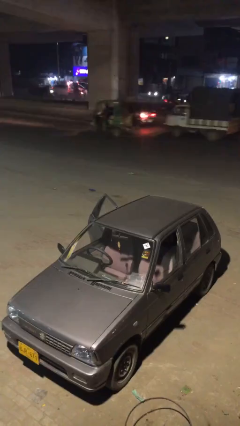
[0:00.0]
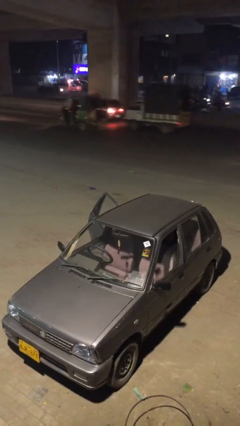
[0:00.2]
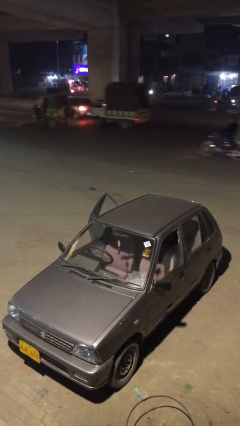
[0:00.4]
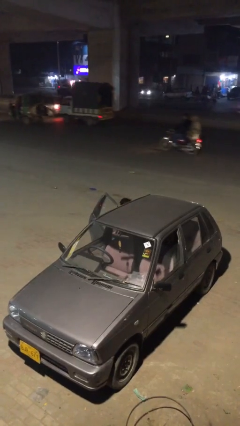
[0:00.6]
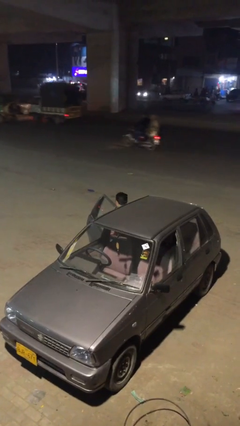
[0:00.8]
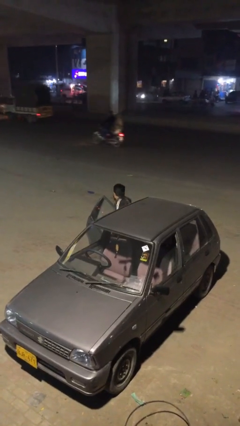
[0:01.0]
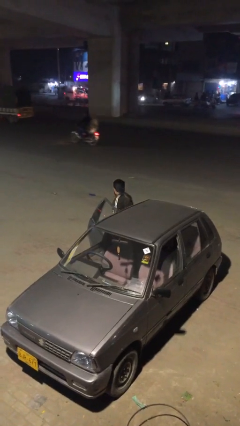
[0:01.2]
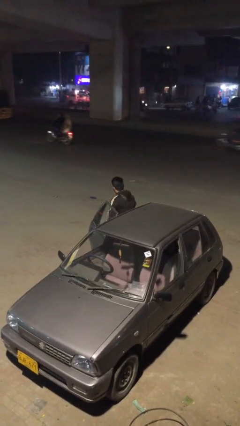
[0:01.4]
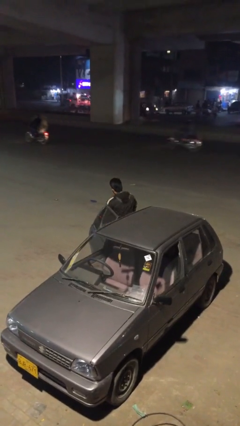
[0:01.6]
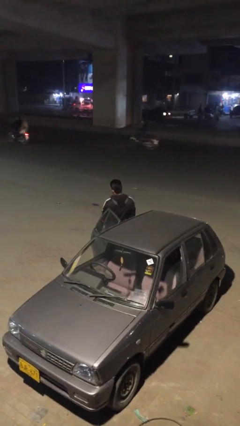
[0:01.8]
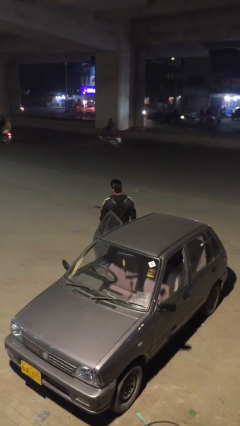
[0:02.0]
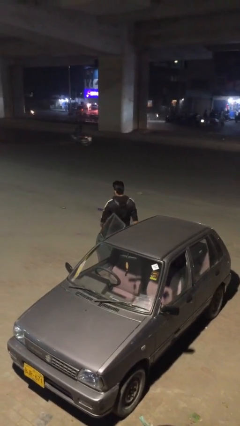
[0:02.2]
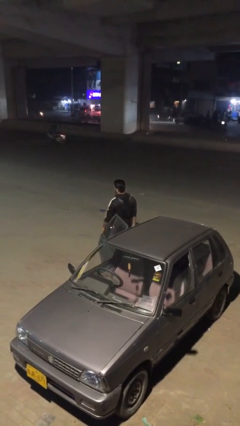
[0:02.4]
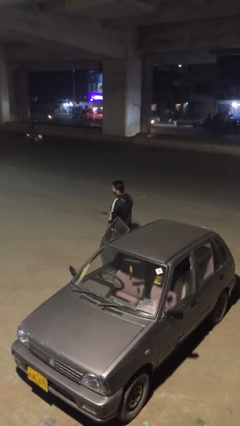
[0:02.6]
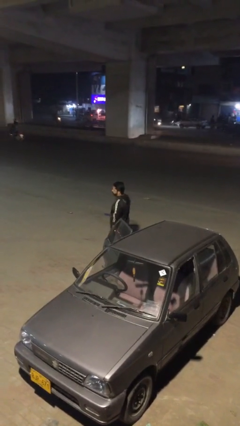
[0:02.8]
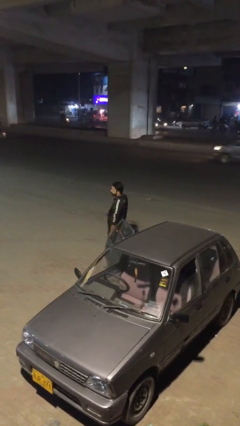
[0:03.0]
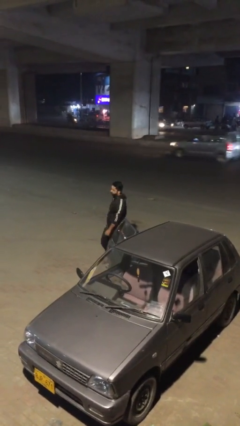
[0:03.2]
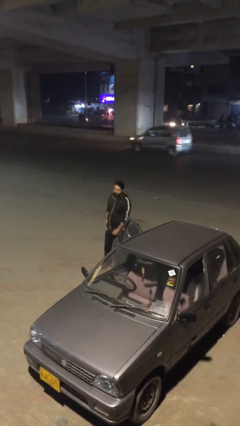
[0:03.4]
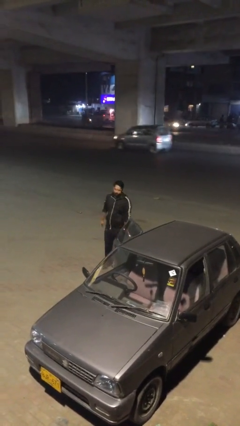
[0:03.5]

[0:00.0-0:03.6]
person exits car

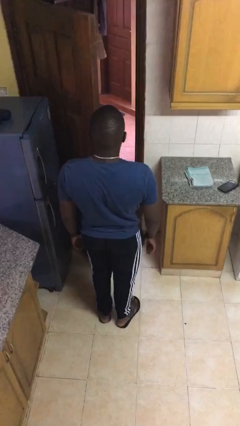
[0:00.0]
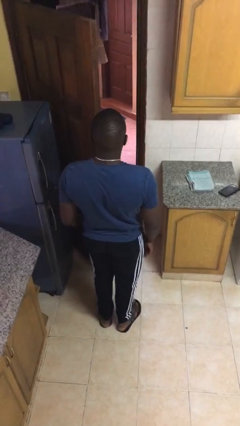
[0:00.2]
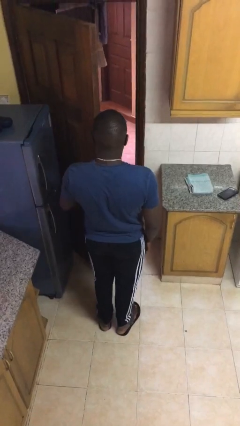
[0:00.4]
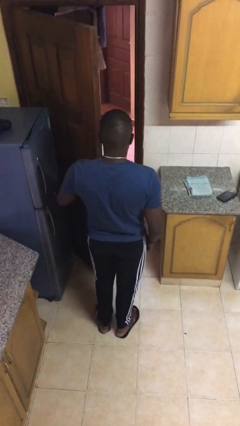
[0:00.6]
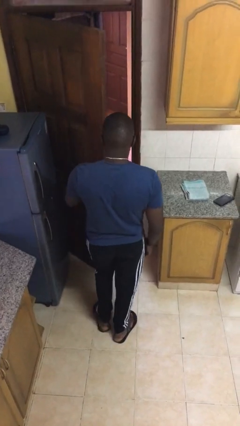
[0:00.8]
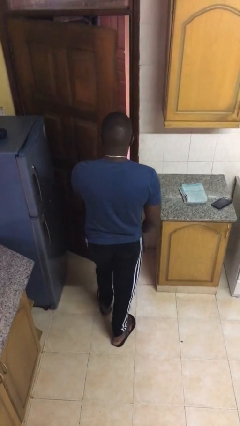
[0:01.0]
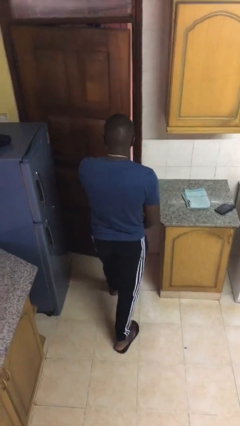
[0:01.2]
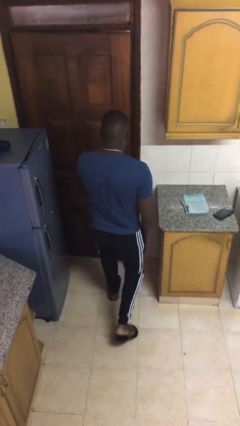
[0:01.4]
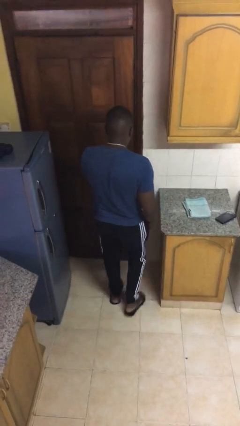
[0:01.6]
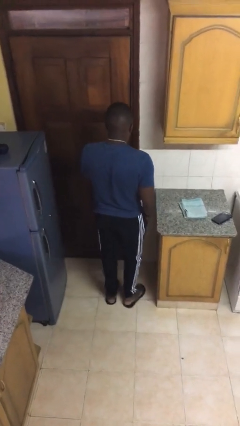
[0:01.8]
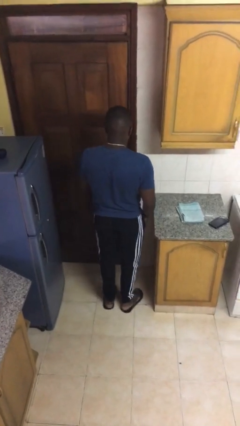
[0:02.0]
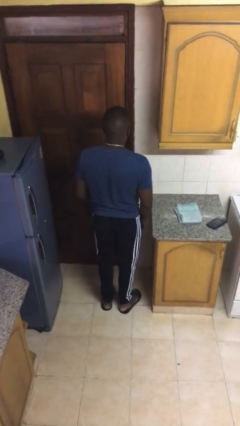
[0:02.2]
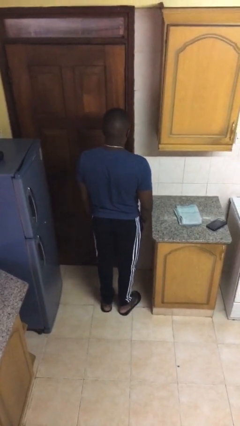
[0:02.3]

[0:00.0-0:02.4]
person closes facility door

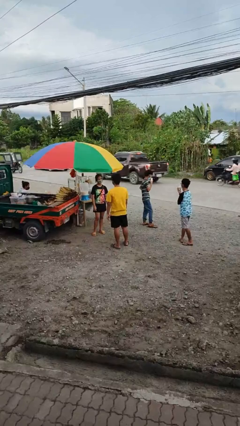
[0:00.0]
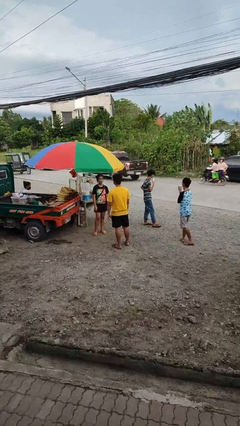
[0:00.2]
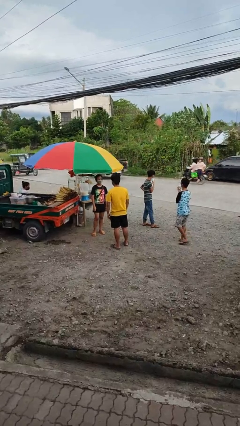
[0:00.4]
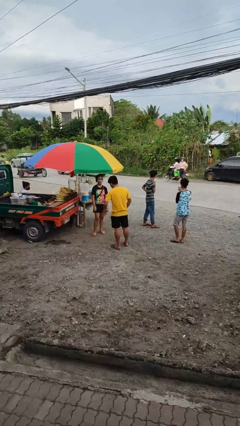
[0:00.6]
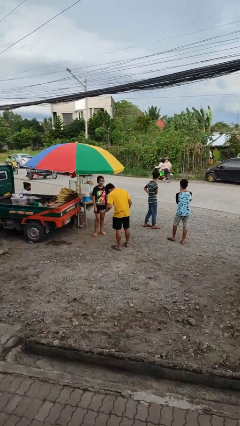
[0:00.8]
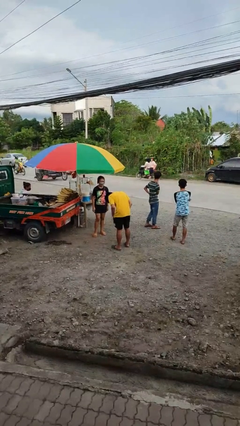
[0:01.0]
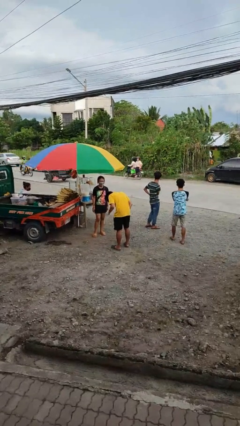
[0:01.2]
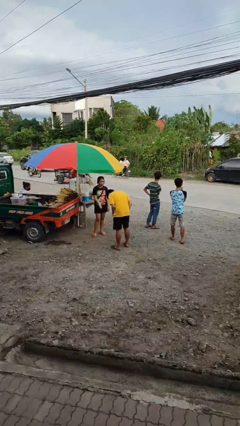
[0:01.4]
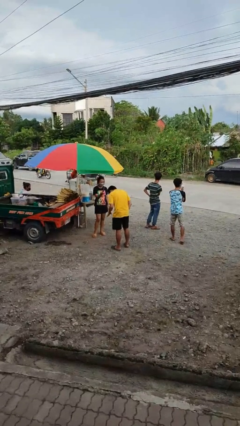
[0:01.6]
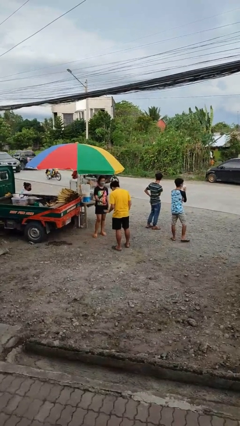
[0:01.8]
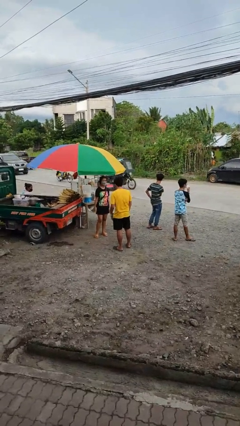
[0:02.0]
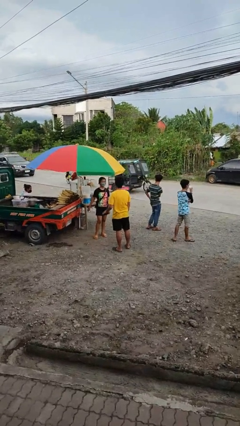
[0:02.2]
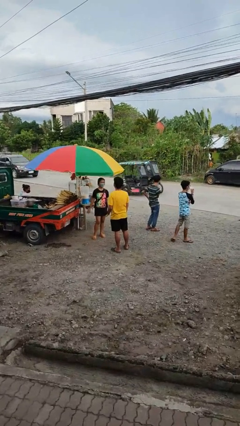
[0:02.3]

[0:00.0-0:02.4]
person laughs with person

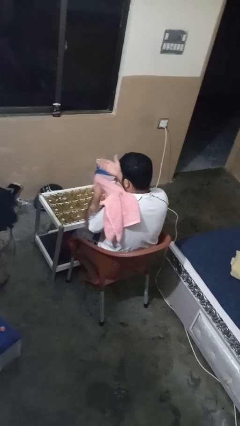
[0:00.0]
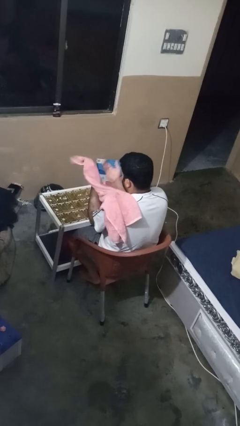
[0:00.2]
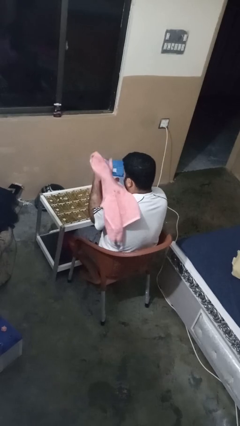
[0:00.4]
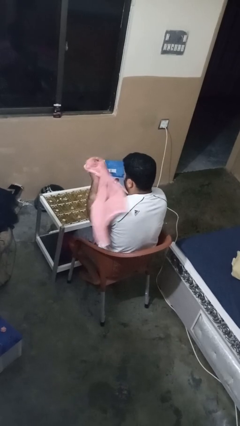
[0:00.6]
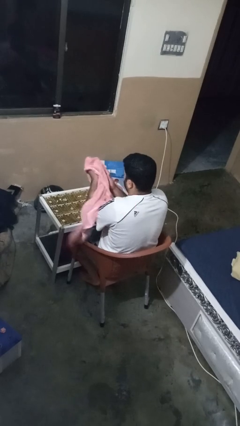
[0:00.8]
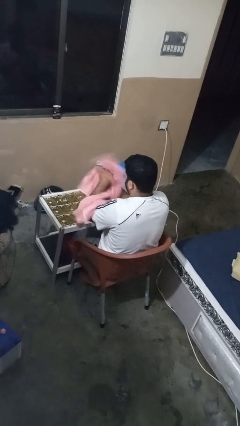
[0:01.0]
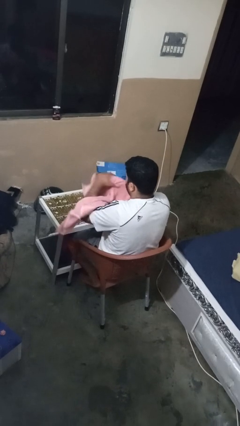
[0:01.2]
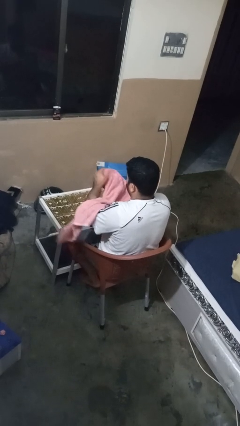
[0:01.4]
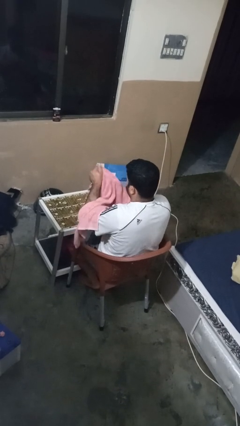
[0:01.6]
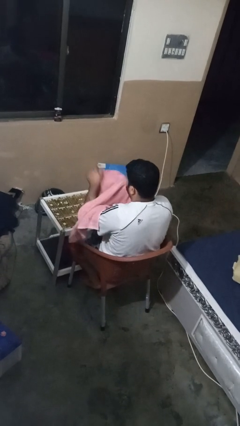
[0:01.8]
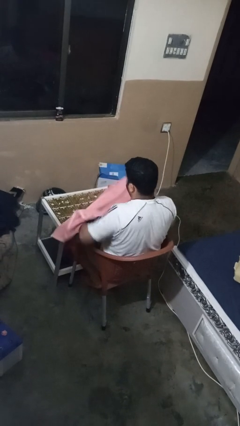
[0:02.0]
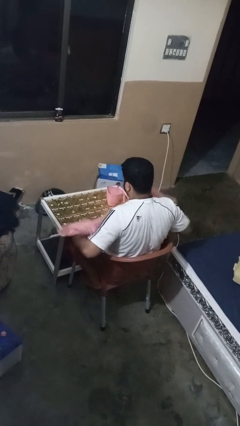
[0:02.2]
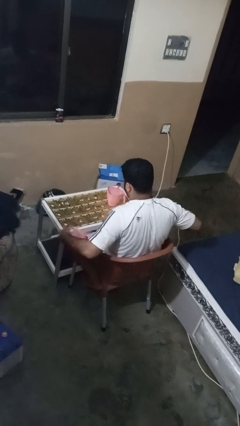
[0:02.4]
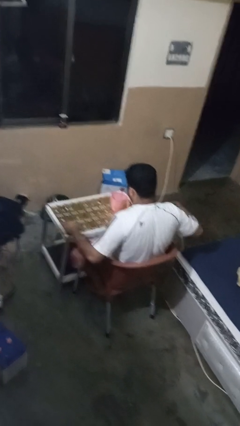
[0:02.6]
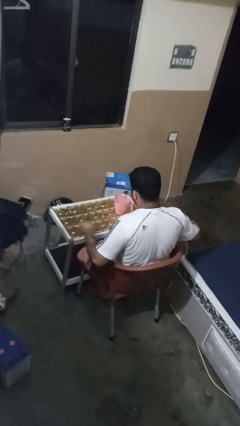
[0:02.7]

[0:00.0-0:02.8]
person dries hands with towel

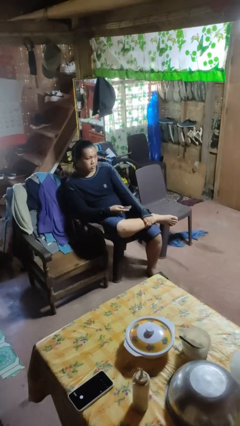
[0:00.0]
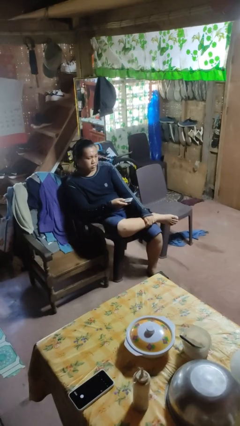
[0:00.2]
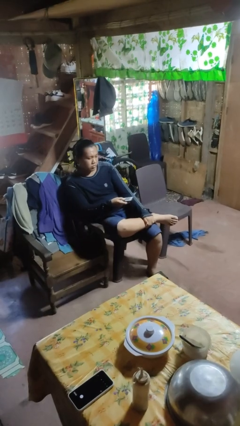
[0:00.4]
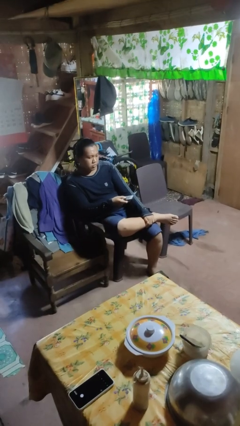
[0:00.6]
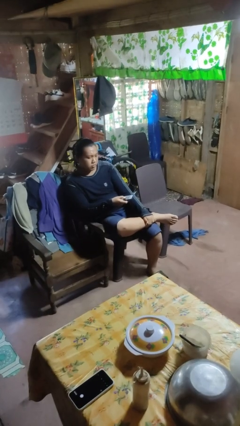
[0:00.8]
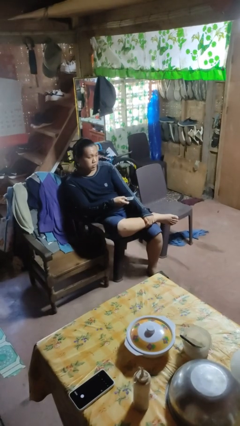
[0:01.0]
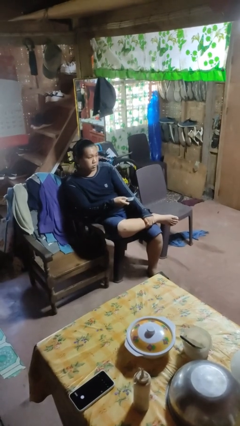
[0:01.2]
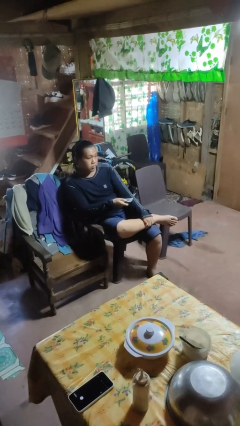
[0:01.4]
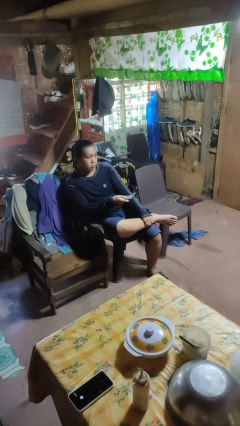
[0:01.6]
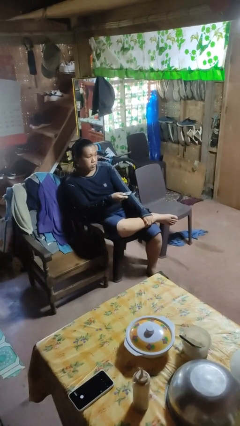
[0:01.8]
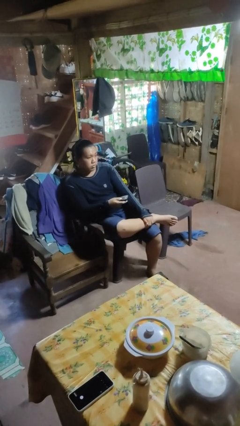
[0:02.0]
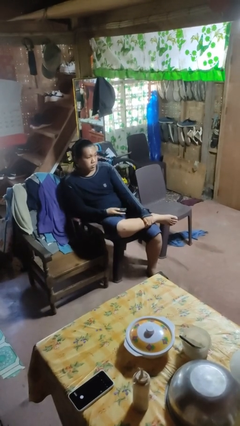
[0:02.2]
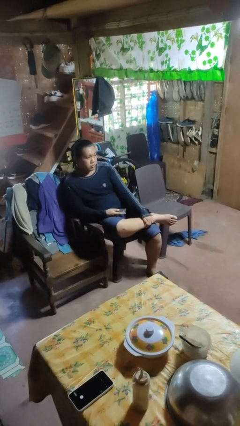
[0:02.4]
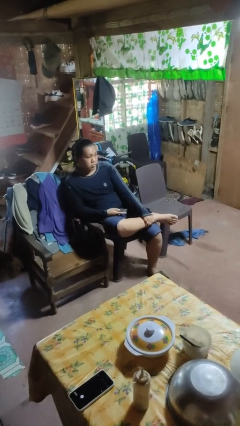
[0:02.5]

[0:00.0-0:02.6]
person uses television remote

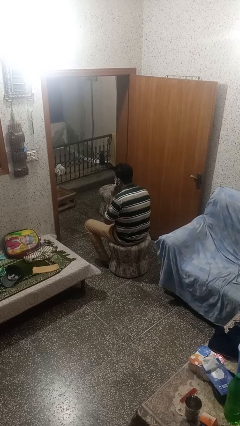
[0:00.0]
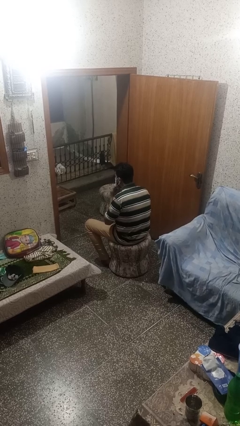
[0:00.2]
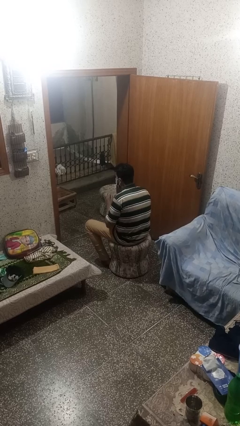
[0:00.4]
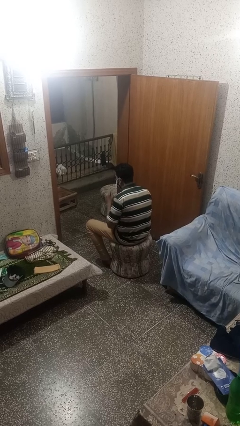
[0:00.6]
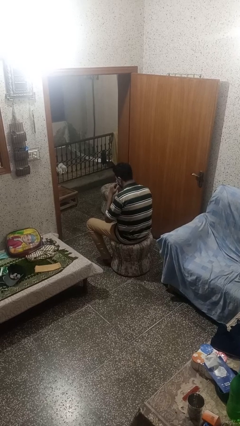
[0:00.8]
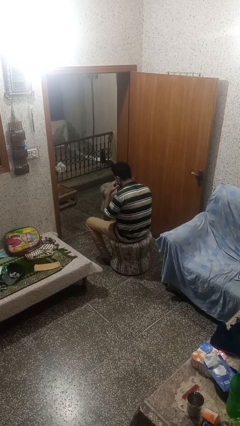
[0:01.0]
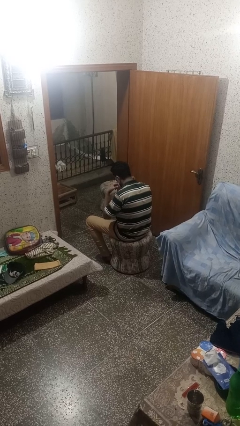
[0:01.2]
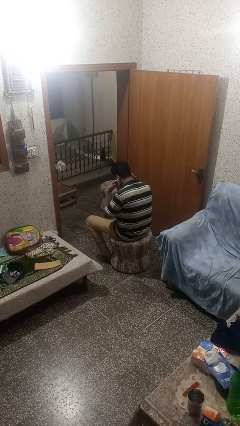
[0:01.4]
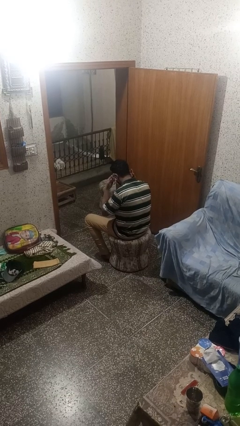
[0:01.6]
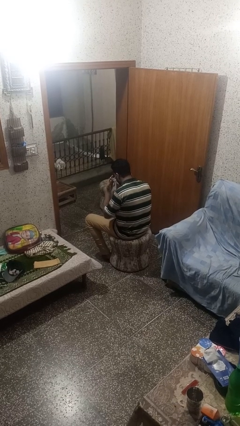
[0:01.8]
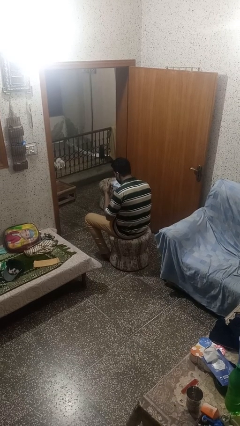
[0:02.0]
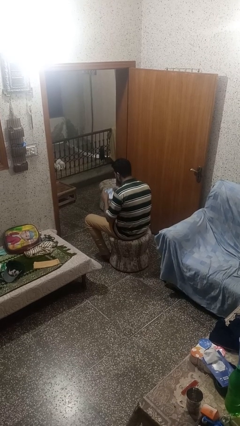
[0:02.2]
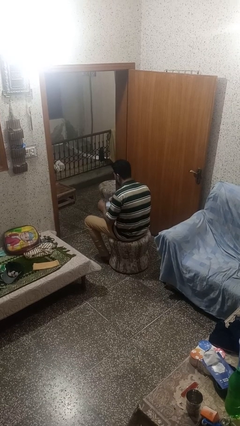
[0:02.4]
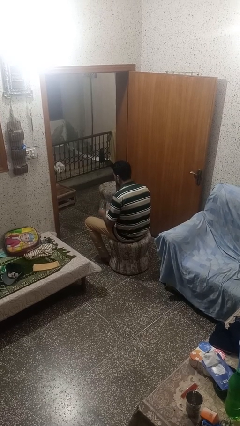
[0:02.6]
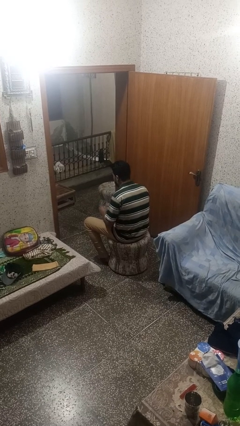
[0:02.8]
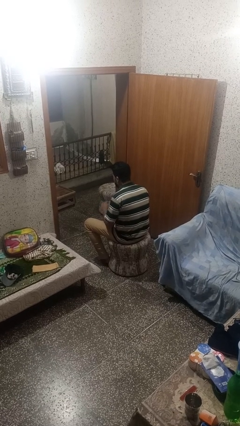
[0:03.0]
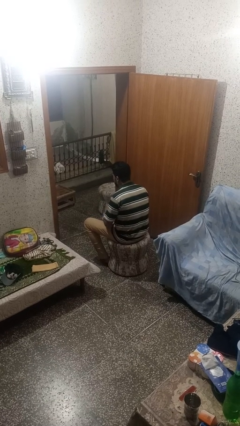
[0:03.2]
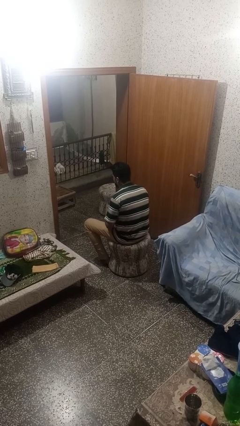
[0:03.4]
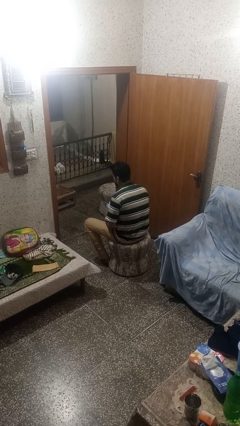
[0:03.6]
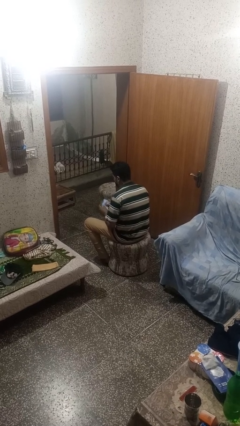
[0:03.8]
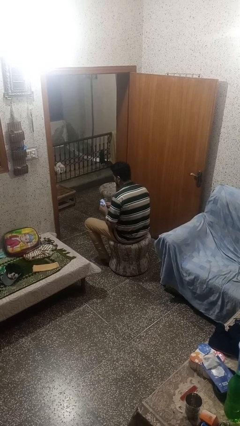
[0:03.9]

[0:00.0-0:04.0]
person takes off facemask
